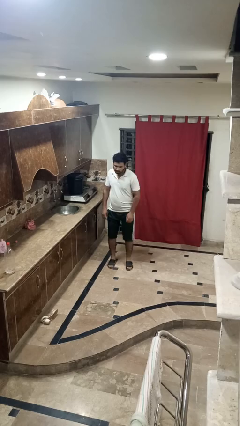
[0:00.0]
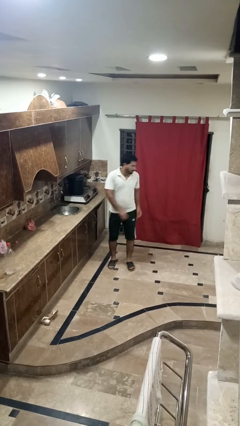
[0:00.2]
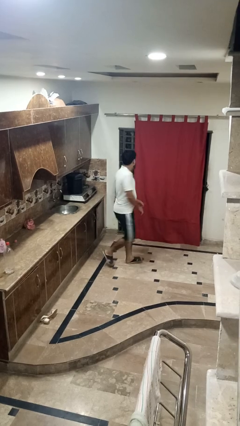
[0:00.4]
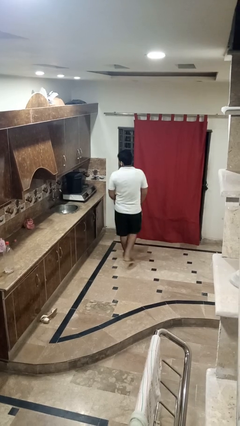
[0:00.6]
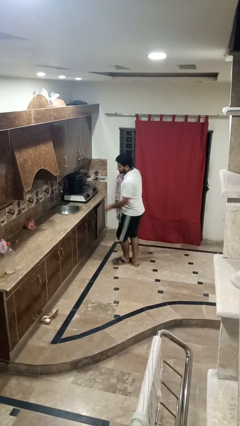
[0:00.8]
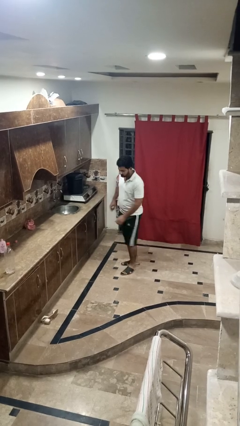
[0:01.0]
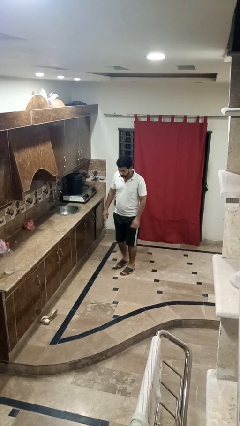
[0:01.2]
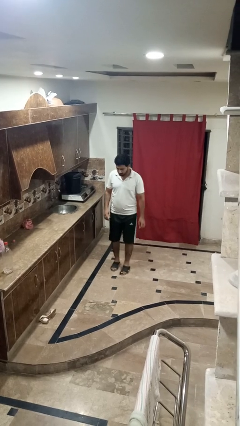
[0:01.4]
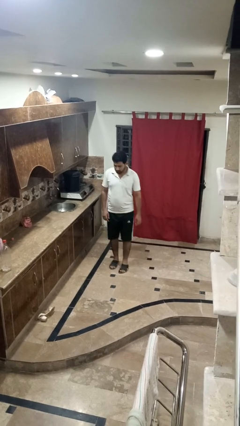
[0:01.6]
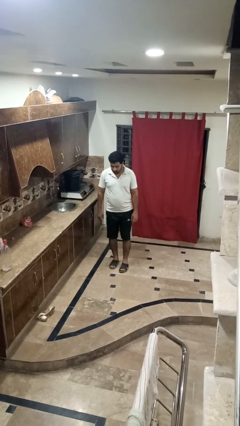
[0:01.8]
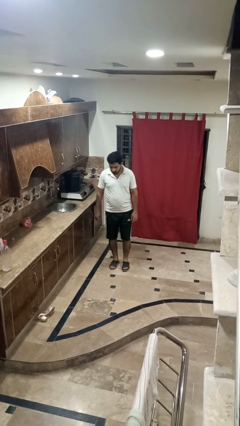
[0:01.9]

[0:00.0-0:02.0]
person twirls

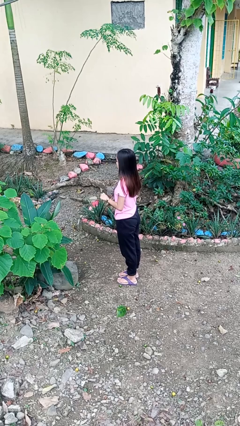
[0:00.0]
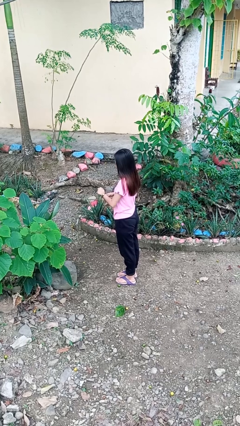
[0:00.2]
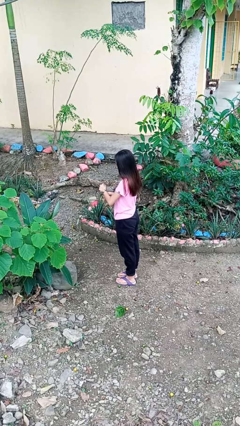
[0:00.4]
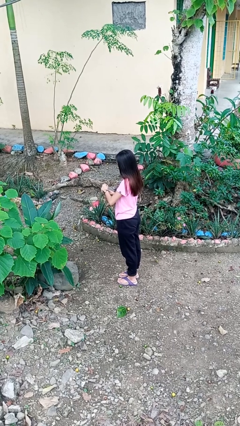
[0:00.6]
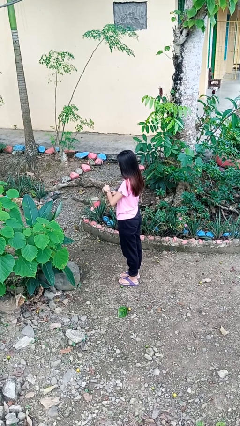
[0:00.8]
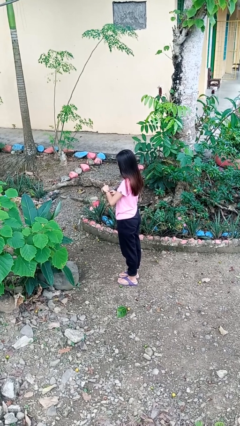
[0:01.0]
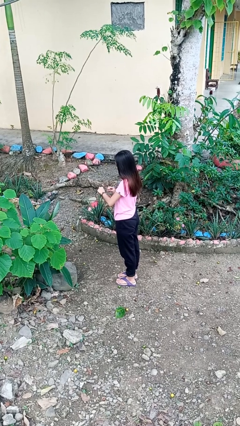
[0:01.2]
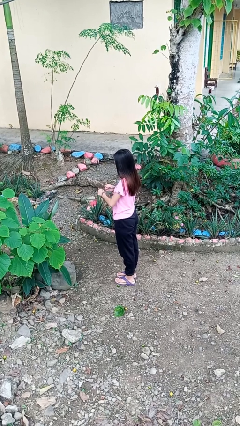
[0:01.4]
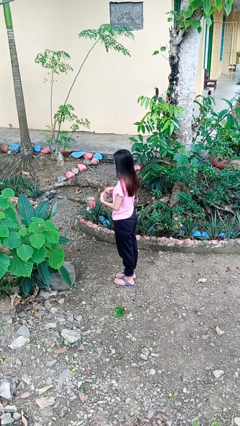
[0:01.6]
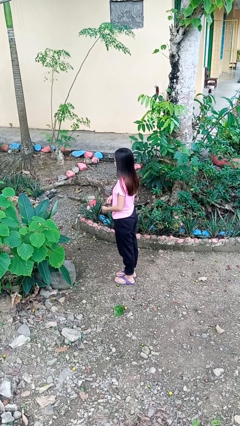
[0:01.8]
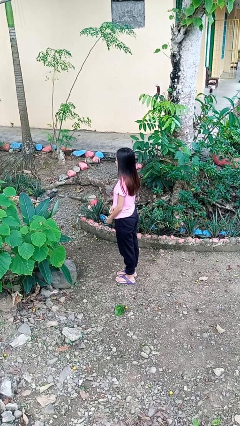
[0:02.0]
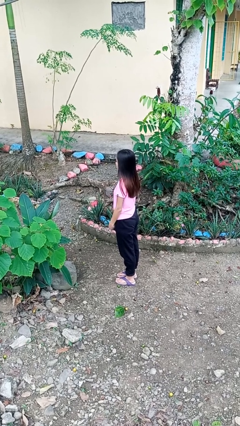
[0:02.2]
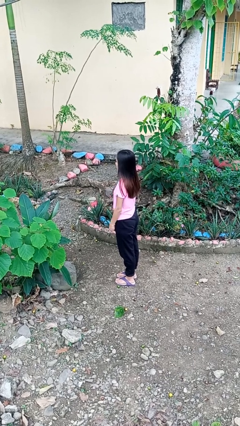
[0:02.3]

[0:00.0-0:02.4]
person takes off wristwatch

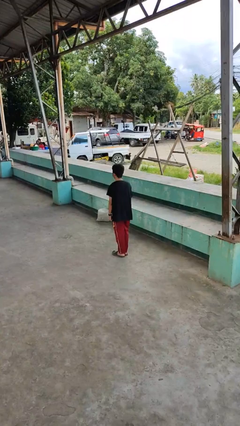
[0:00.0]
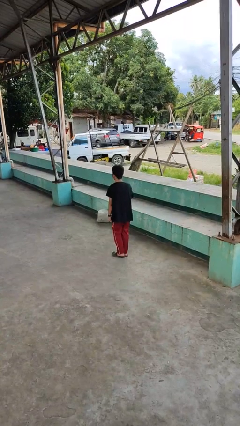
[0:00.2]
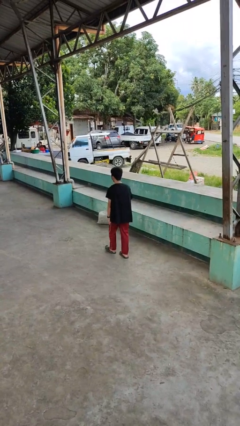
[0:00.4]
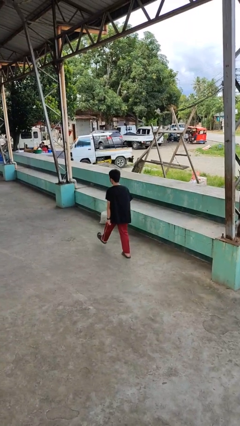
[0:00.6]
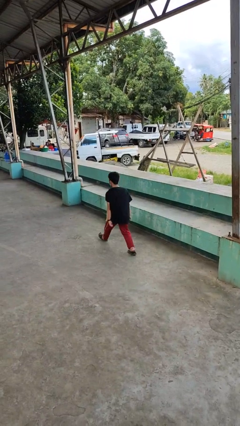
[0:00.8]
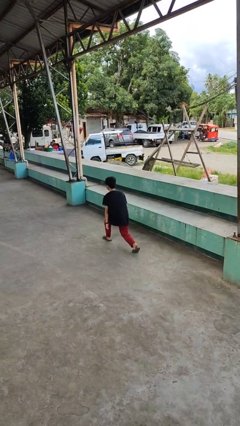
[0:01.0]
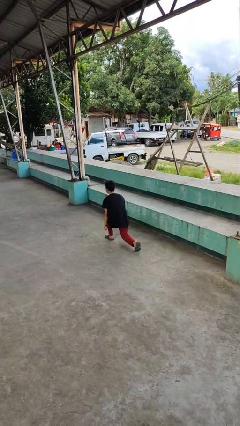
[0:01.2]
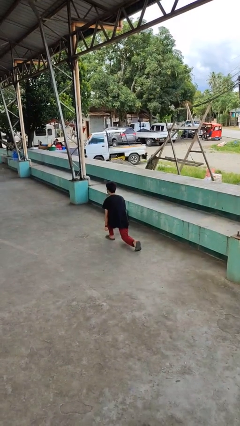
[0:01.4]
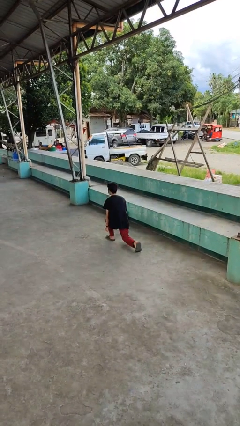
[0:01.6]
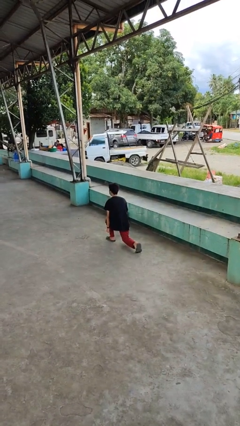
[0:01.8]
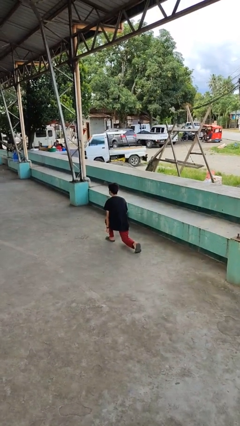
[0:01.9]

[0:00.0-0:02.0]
person exercises with lunges

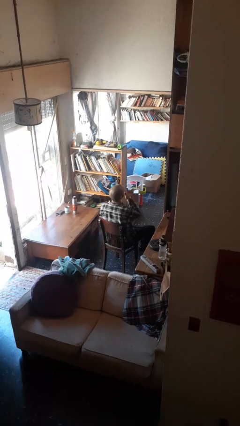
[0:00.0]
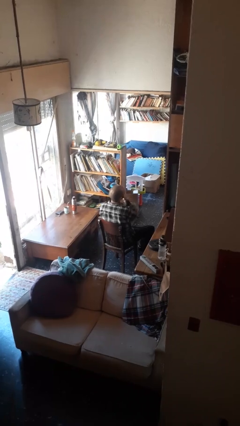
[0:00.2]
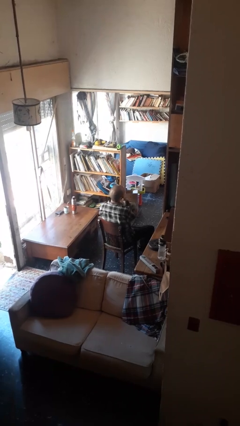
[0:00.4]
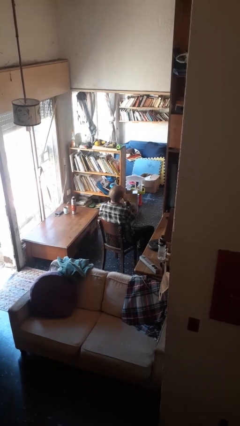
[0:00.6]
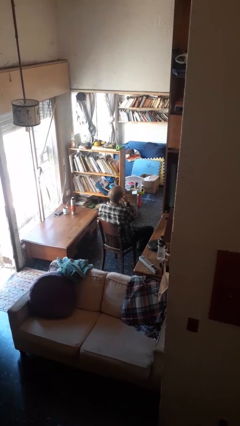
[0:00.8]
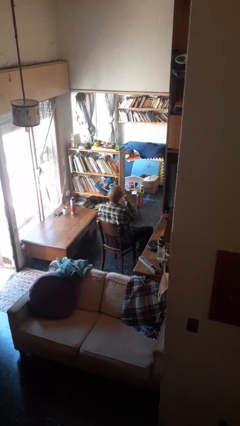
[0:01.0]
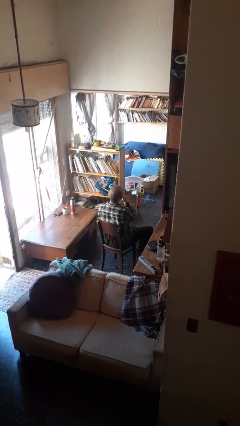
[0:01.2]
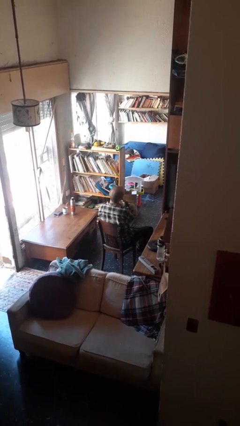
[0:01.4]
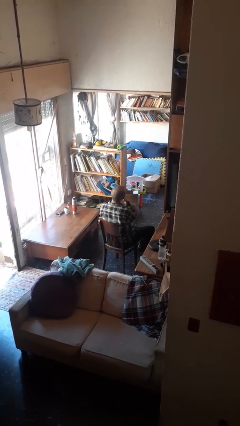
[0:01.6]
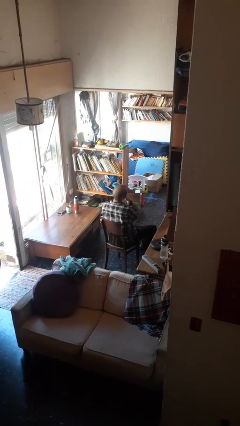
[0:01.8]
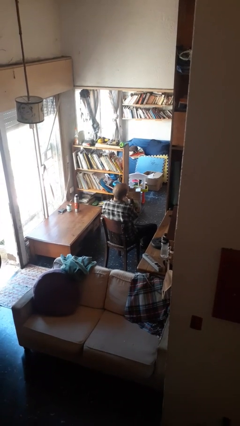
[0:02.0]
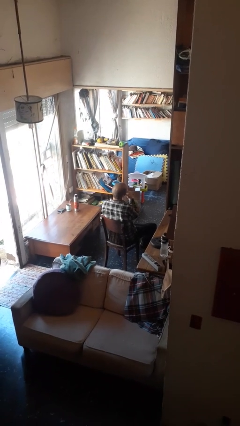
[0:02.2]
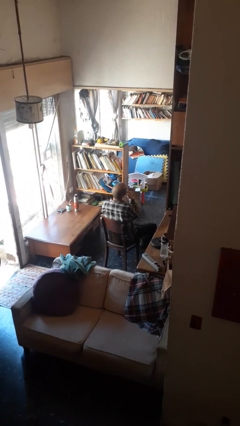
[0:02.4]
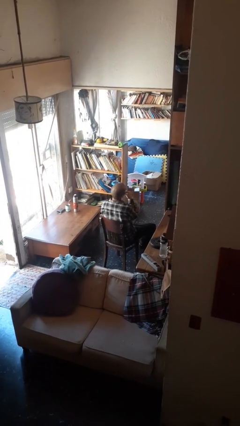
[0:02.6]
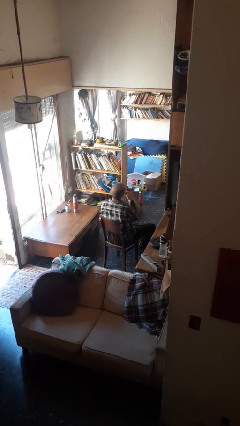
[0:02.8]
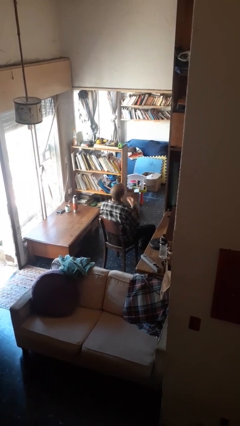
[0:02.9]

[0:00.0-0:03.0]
person strokes chin

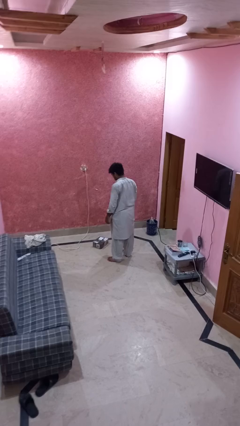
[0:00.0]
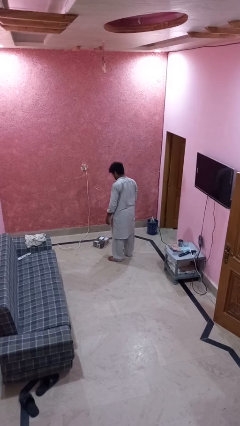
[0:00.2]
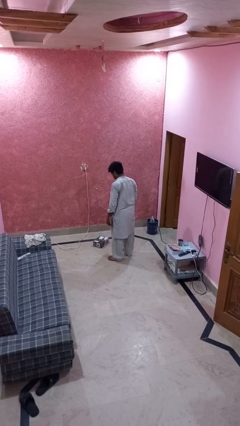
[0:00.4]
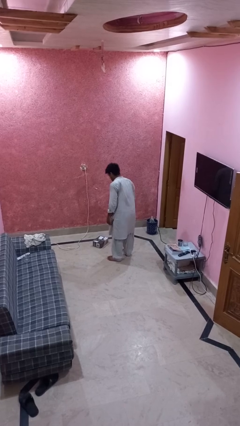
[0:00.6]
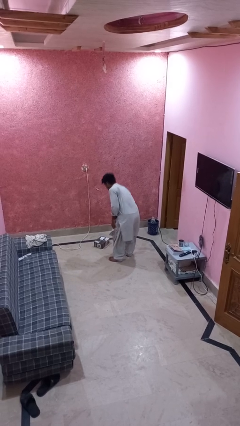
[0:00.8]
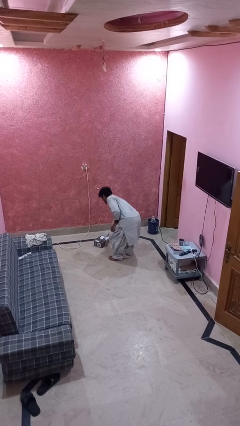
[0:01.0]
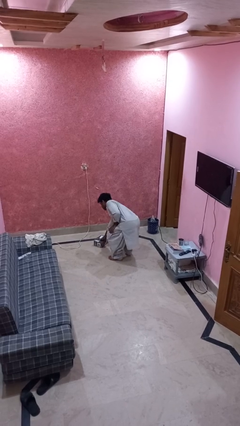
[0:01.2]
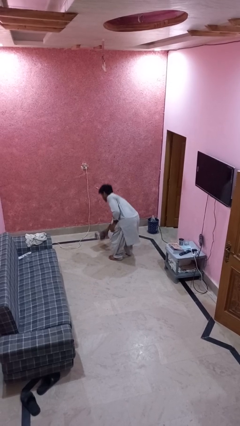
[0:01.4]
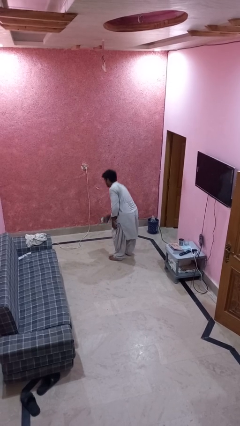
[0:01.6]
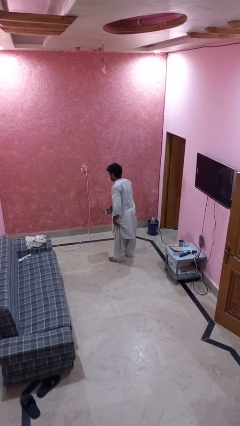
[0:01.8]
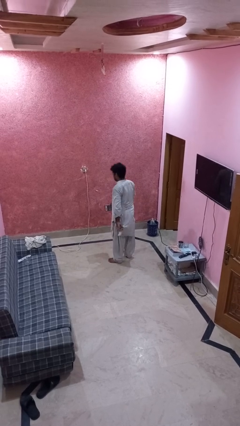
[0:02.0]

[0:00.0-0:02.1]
person picks up object from floor

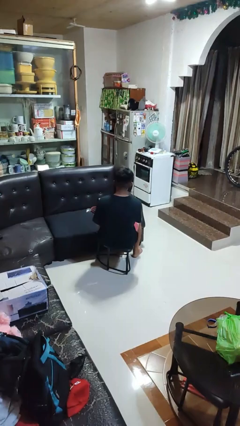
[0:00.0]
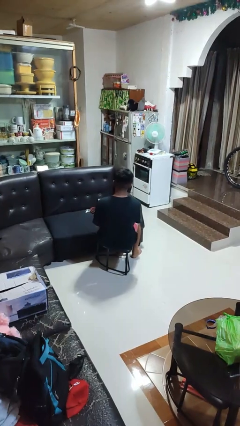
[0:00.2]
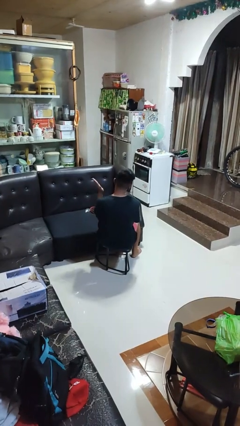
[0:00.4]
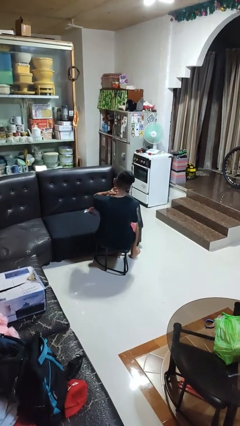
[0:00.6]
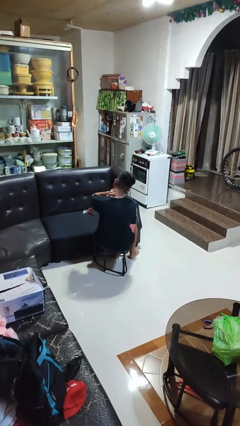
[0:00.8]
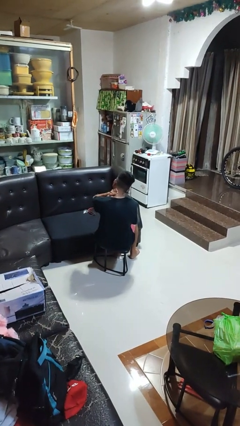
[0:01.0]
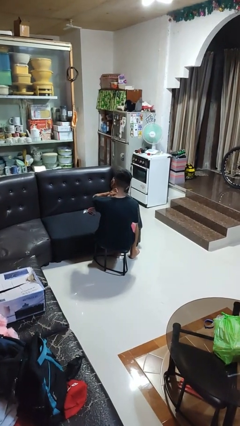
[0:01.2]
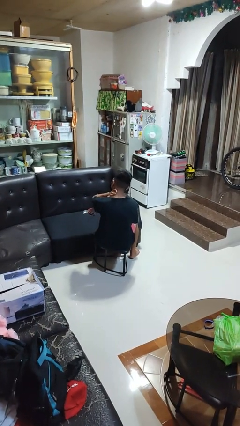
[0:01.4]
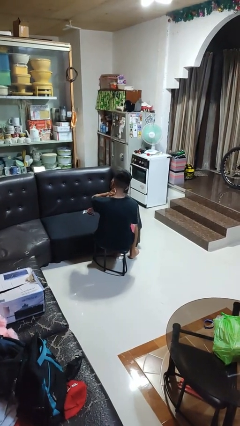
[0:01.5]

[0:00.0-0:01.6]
person swats bug

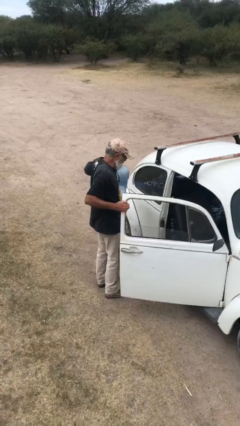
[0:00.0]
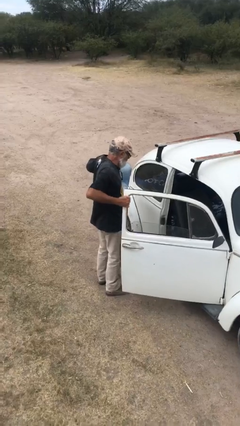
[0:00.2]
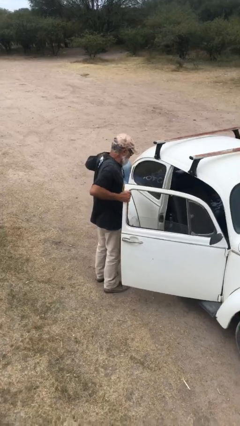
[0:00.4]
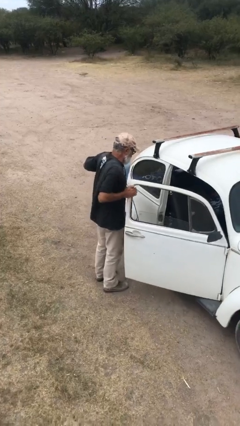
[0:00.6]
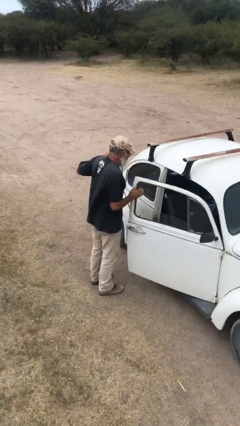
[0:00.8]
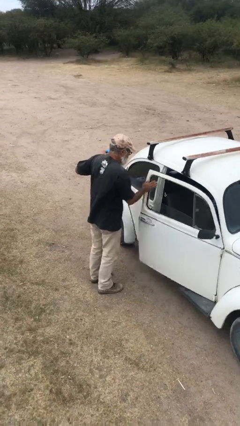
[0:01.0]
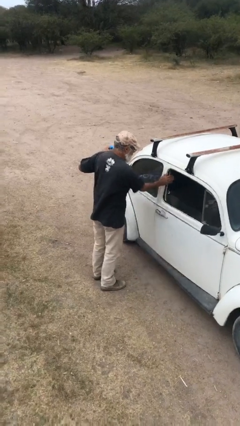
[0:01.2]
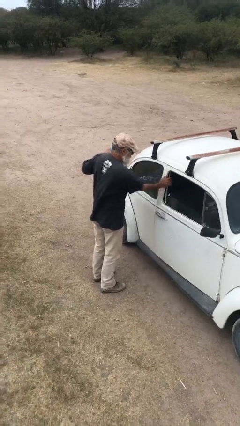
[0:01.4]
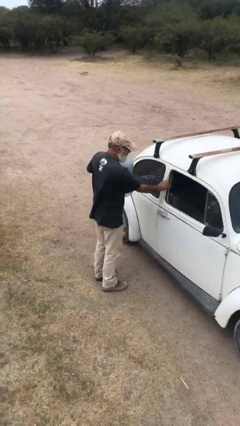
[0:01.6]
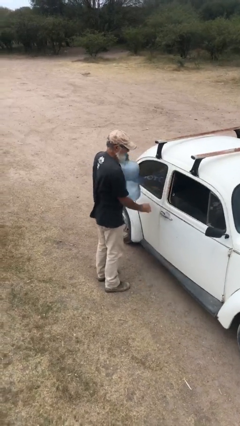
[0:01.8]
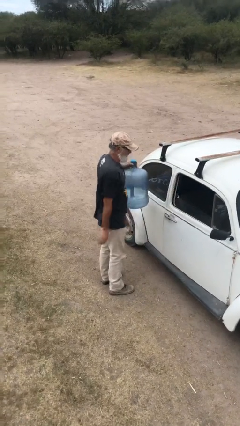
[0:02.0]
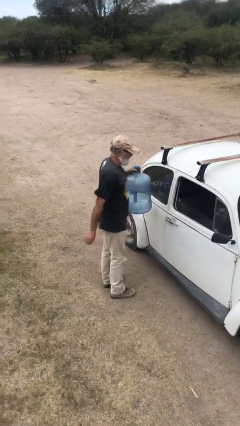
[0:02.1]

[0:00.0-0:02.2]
person closes car door

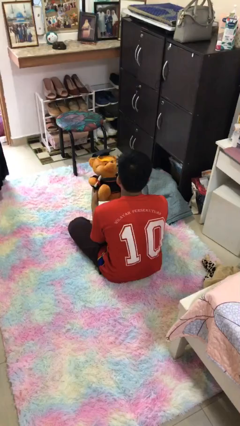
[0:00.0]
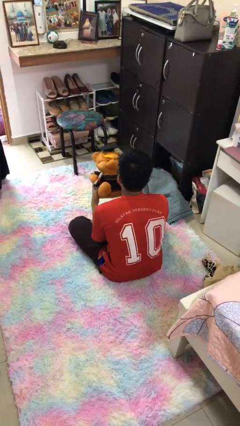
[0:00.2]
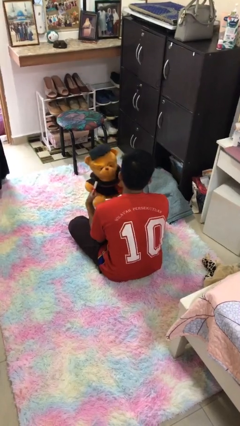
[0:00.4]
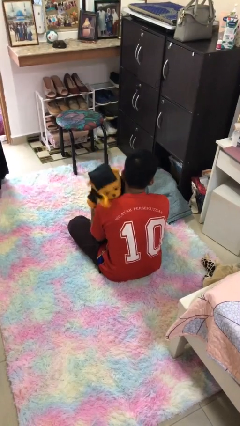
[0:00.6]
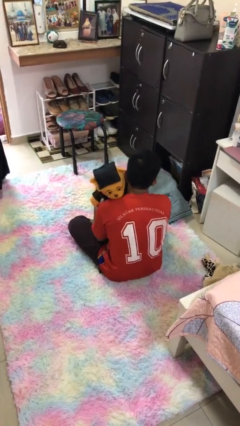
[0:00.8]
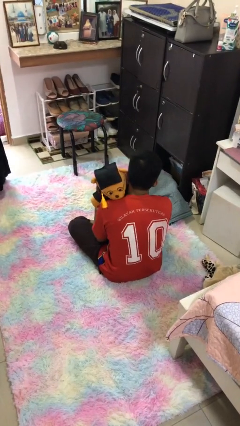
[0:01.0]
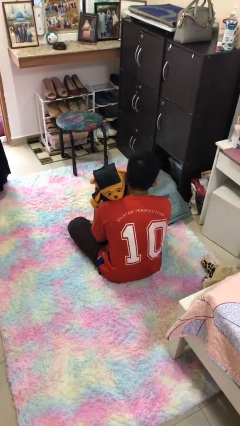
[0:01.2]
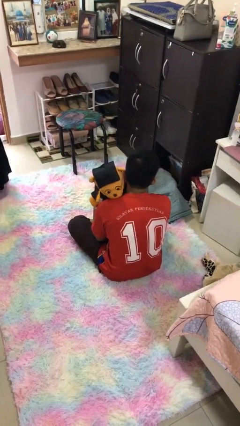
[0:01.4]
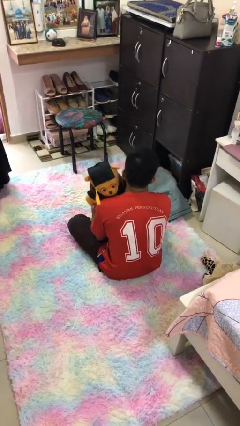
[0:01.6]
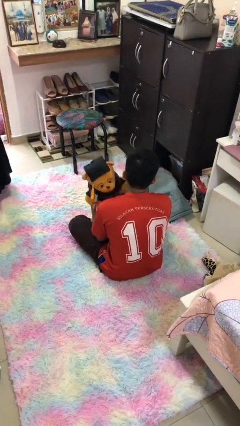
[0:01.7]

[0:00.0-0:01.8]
person hugs stuffed animal

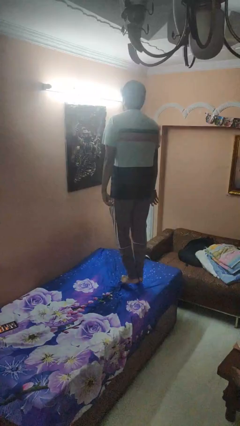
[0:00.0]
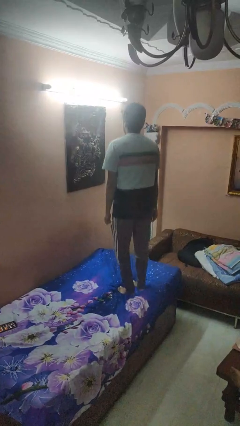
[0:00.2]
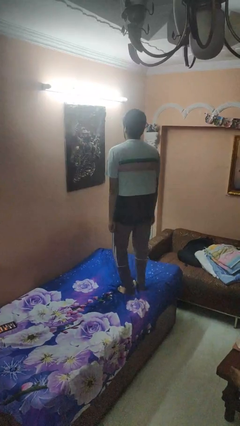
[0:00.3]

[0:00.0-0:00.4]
person jumps on bed
